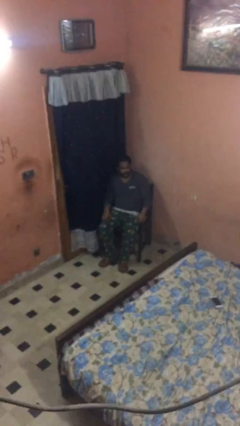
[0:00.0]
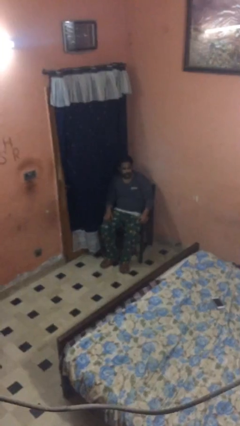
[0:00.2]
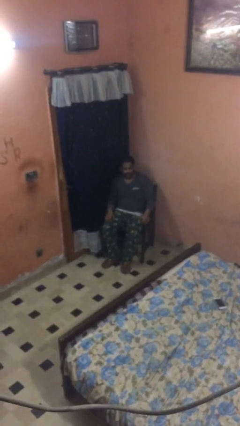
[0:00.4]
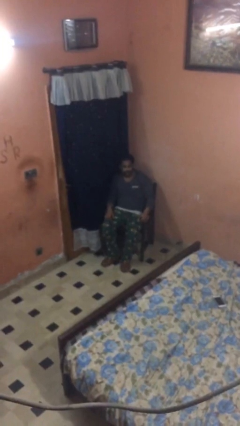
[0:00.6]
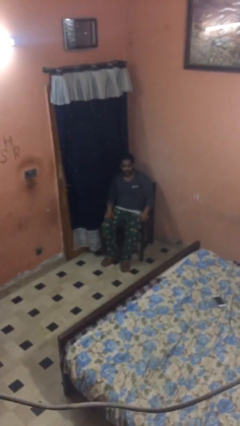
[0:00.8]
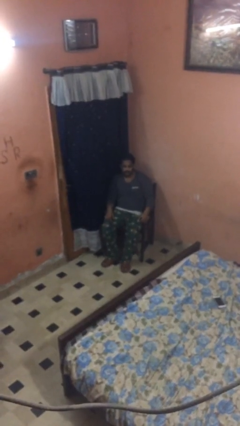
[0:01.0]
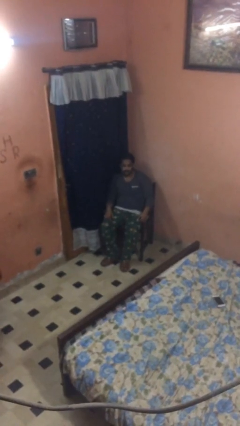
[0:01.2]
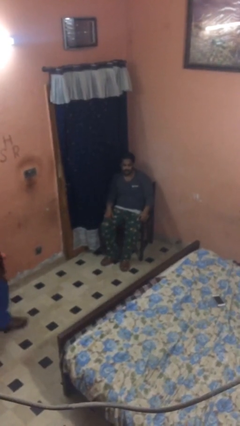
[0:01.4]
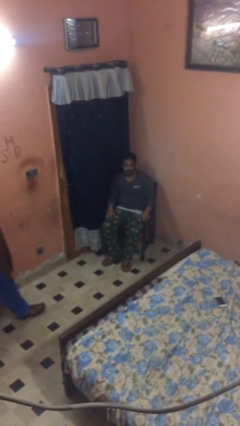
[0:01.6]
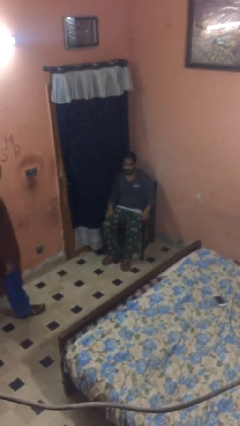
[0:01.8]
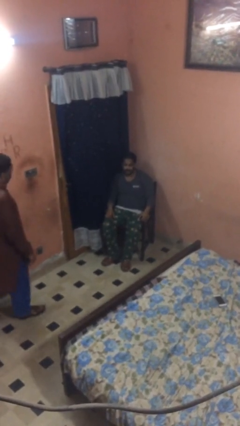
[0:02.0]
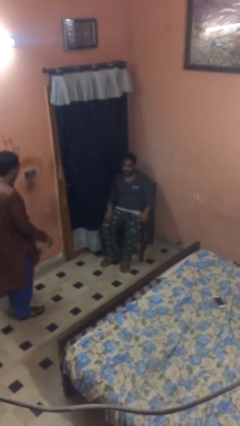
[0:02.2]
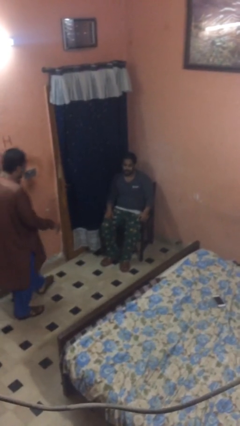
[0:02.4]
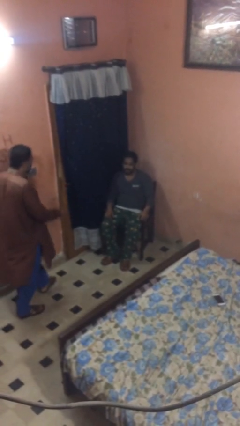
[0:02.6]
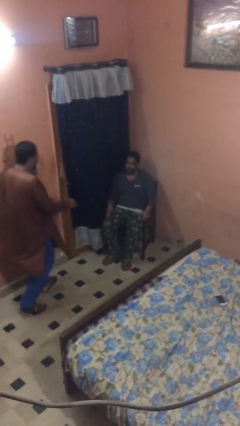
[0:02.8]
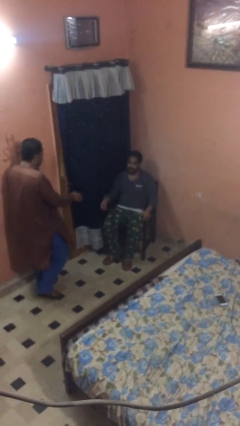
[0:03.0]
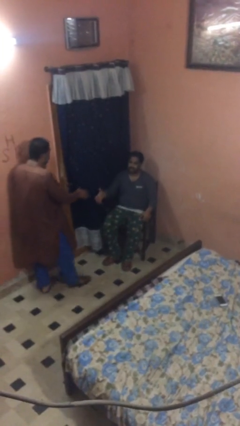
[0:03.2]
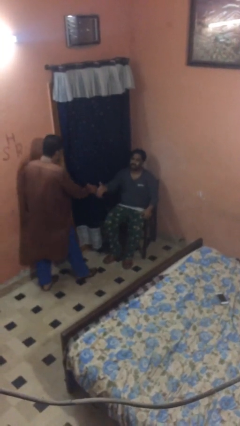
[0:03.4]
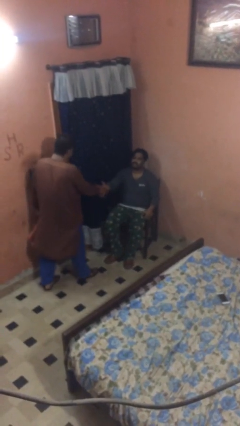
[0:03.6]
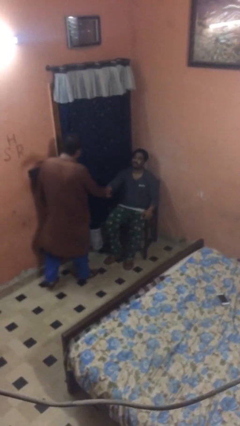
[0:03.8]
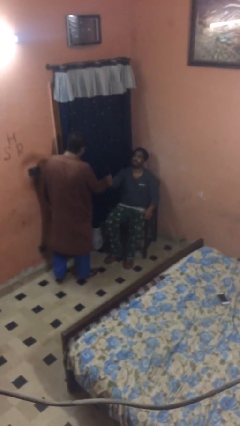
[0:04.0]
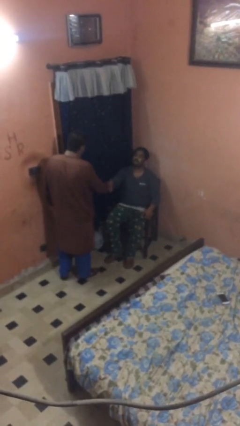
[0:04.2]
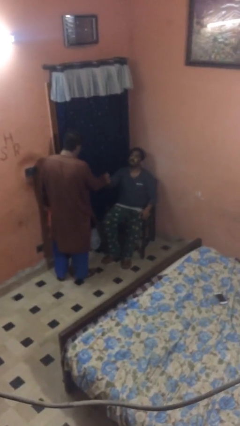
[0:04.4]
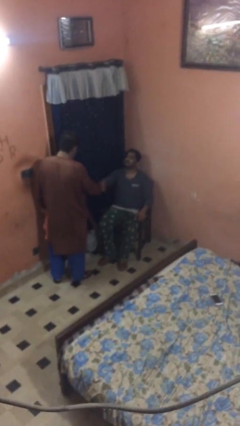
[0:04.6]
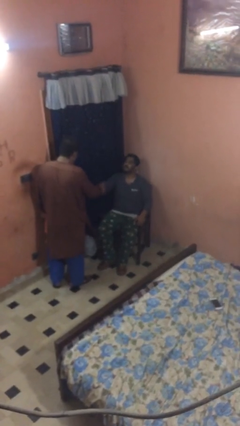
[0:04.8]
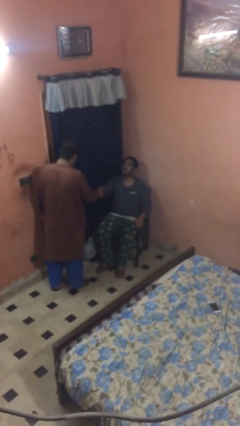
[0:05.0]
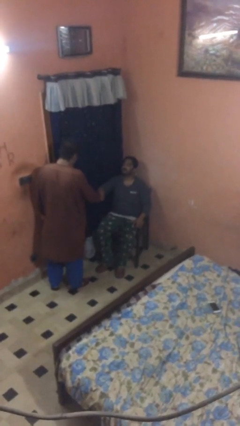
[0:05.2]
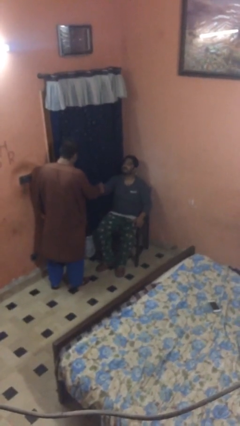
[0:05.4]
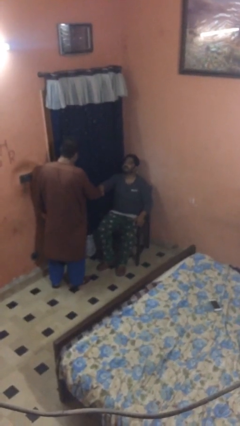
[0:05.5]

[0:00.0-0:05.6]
person shakes hand

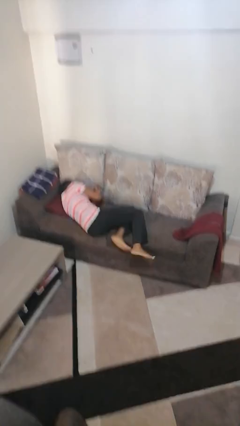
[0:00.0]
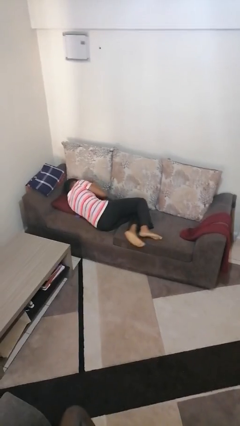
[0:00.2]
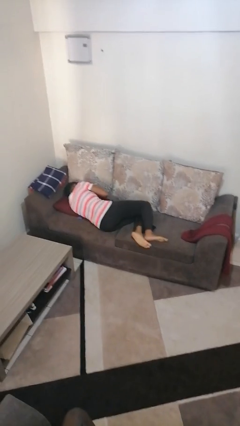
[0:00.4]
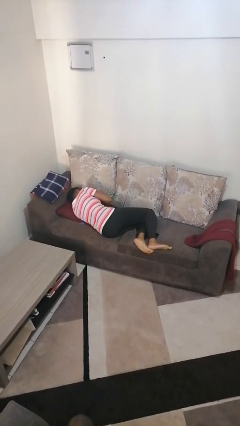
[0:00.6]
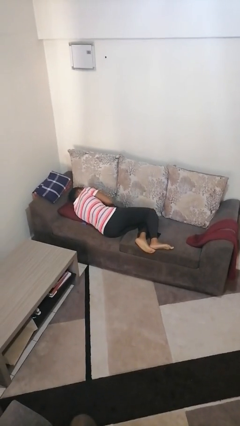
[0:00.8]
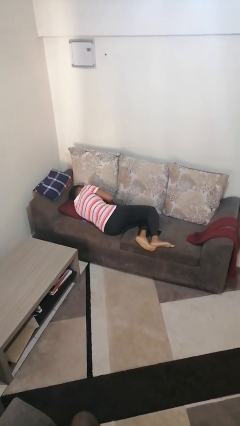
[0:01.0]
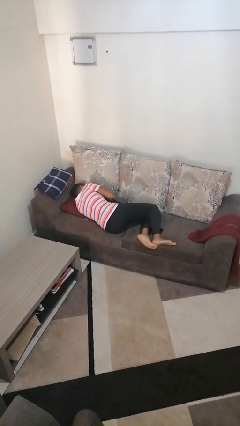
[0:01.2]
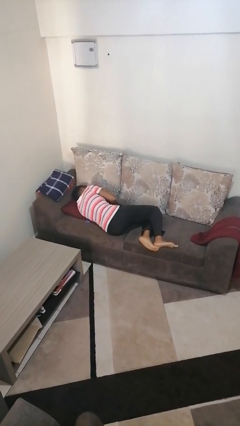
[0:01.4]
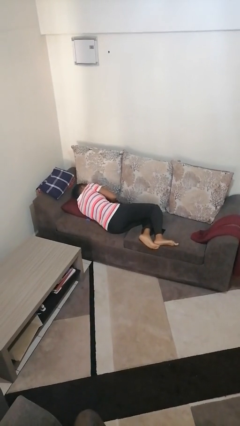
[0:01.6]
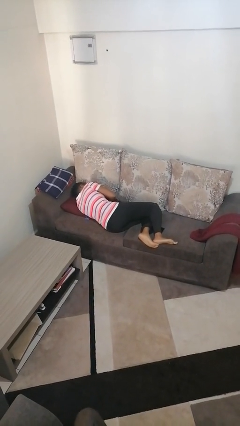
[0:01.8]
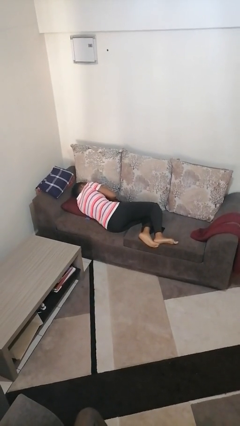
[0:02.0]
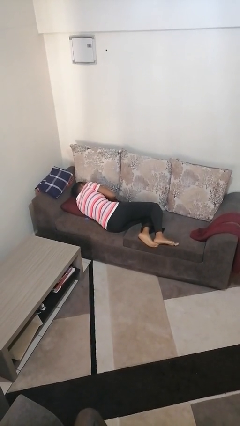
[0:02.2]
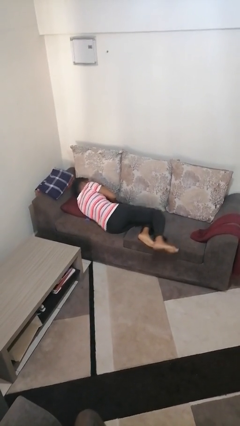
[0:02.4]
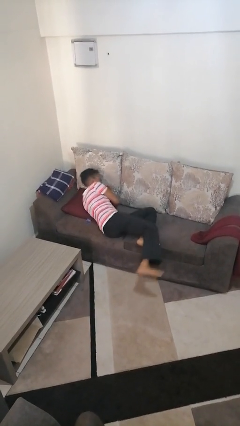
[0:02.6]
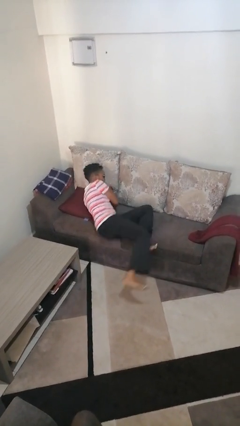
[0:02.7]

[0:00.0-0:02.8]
person lies down on bed

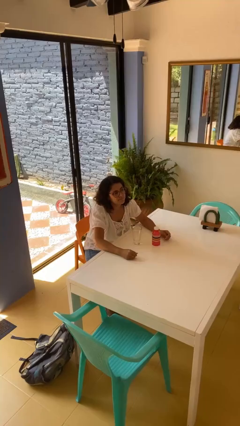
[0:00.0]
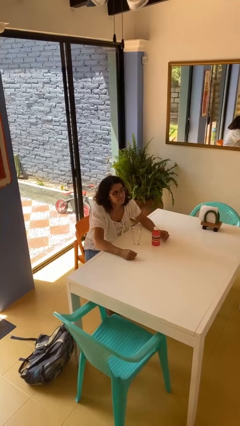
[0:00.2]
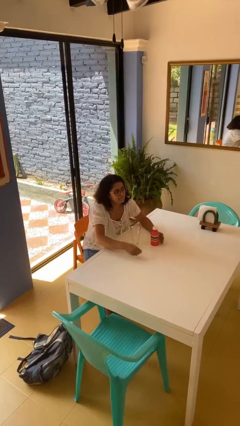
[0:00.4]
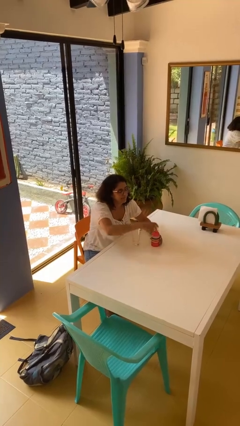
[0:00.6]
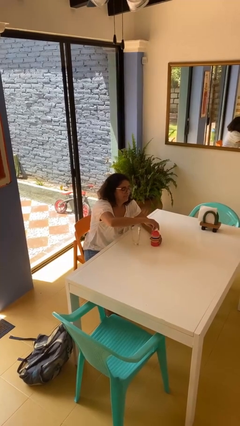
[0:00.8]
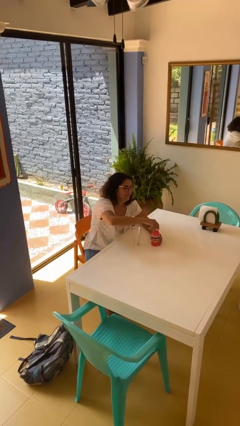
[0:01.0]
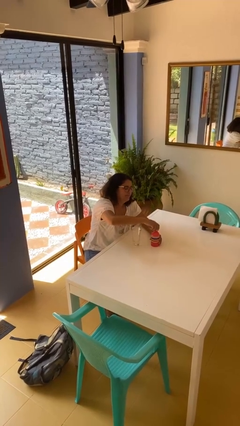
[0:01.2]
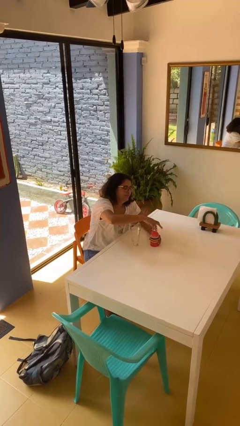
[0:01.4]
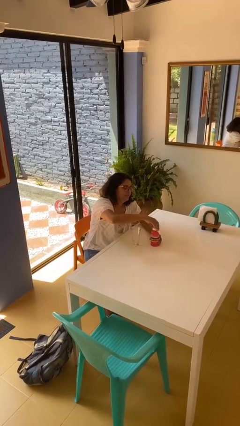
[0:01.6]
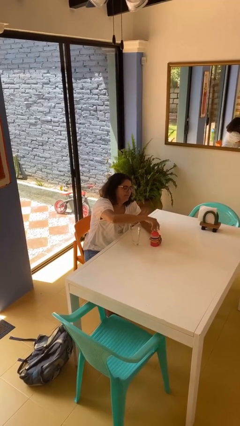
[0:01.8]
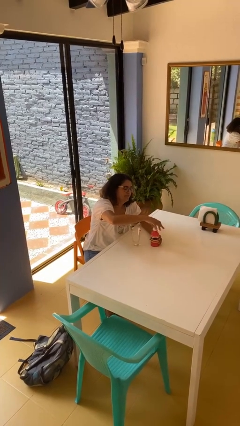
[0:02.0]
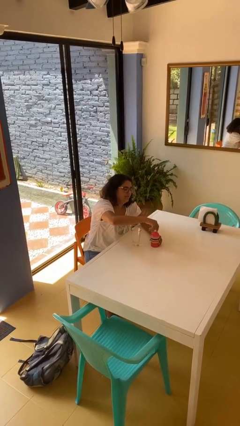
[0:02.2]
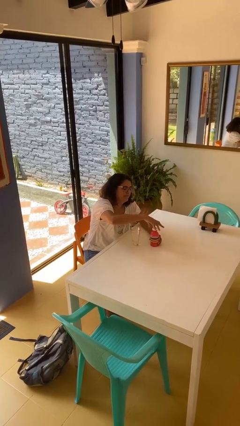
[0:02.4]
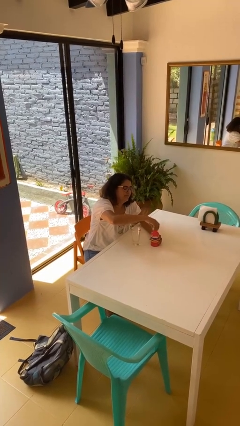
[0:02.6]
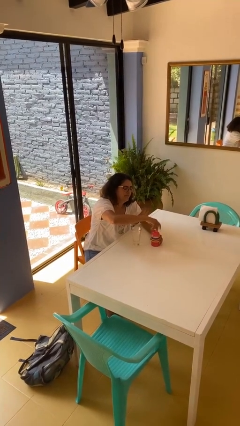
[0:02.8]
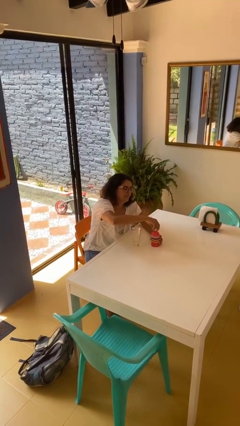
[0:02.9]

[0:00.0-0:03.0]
person unscrews lid from bottle

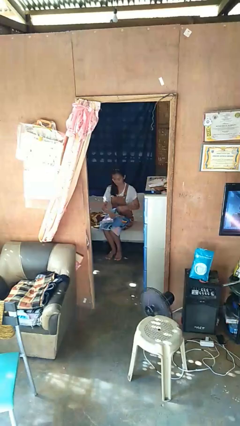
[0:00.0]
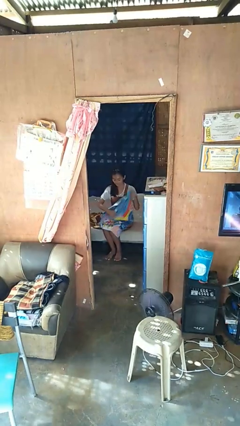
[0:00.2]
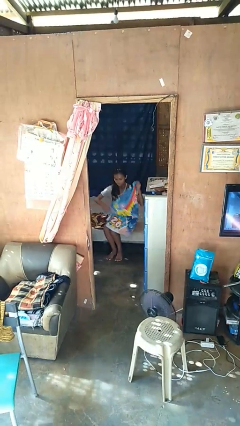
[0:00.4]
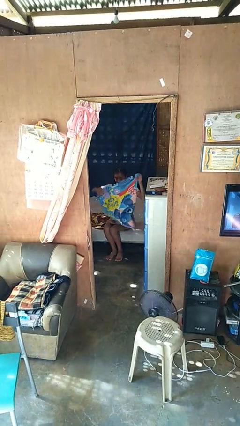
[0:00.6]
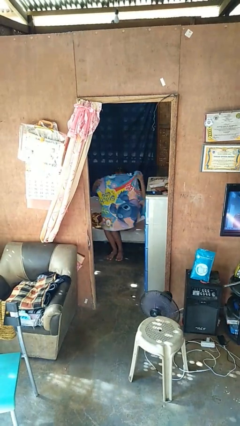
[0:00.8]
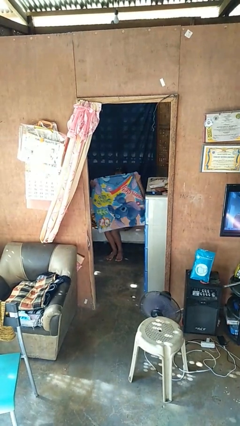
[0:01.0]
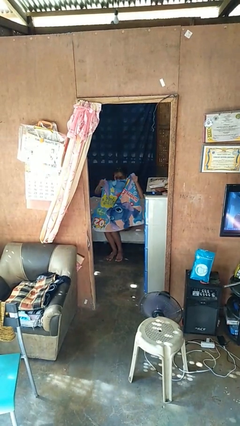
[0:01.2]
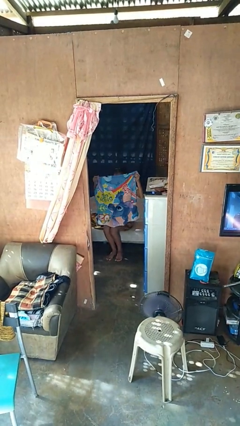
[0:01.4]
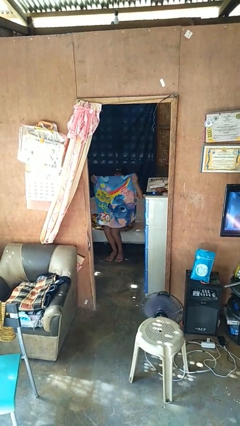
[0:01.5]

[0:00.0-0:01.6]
person unfolds blanket

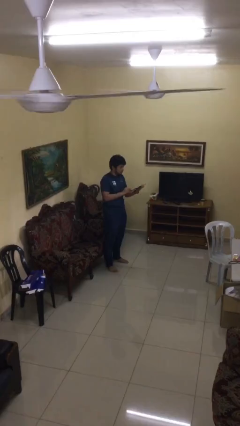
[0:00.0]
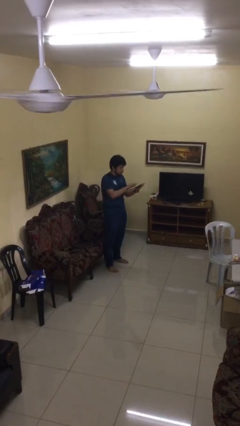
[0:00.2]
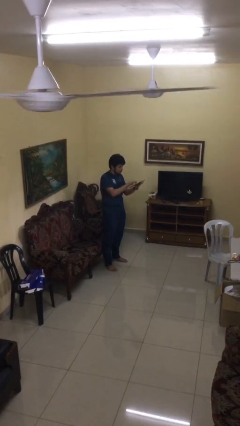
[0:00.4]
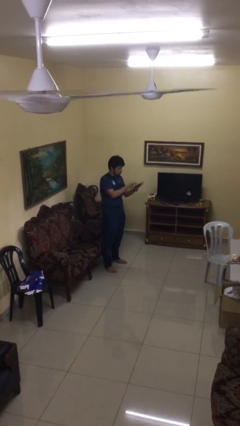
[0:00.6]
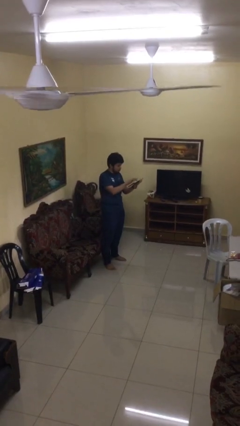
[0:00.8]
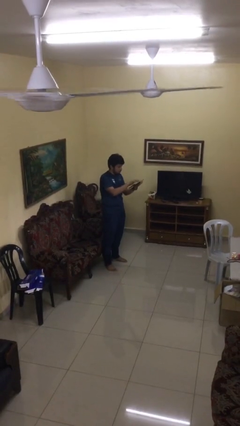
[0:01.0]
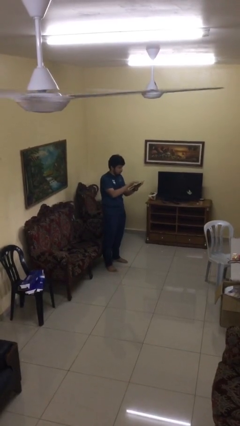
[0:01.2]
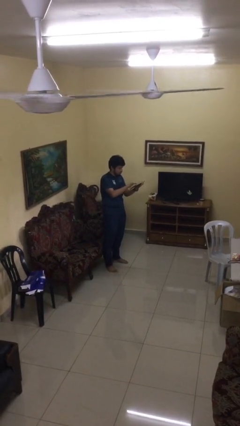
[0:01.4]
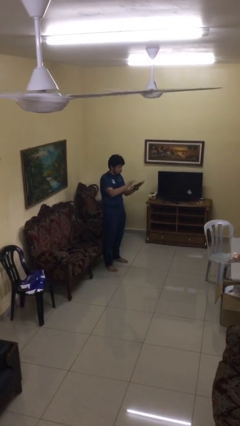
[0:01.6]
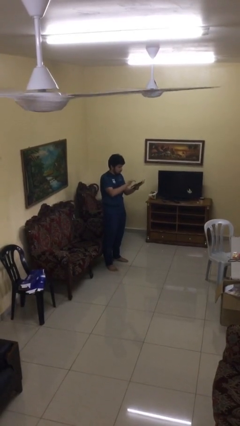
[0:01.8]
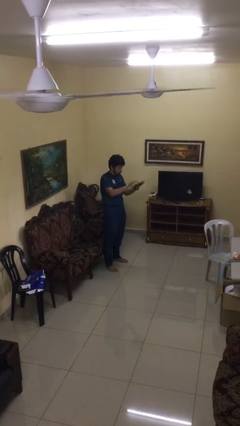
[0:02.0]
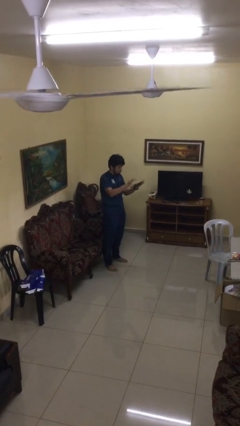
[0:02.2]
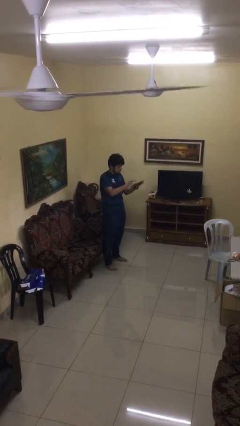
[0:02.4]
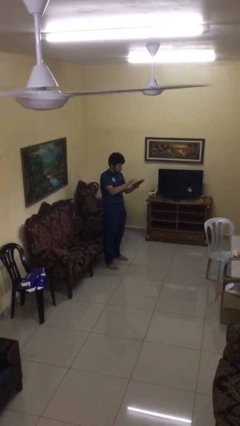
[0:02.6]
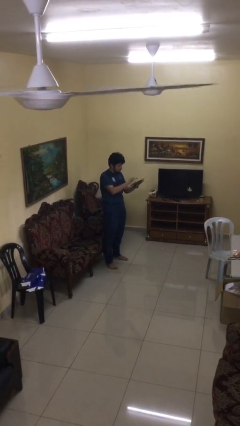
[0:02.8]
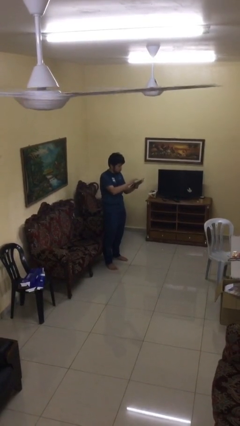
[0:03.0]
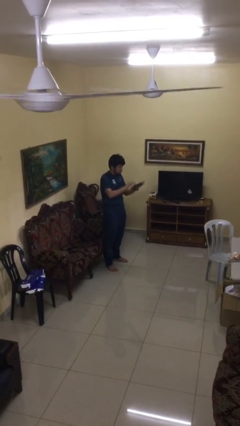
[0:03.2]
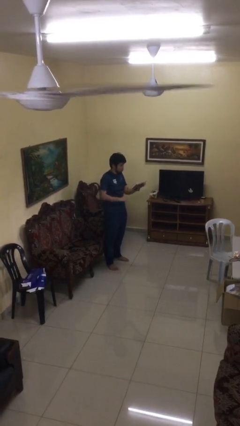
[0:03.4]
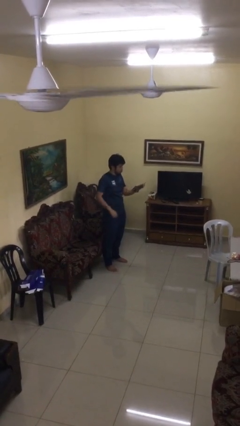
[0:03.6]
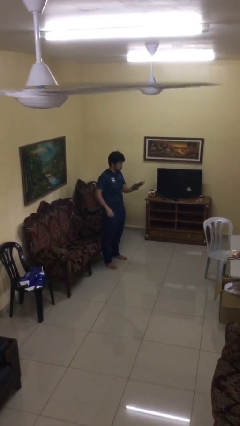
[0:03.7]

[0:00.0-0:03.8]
person interacts with tablet

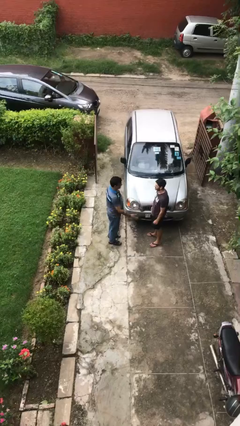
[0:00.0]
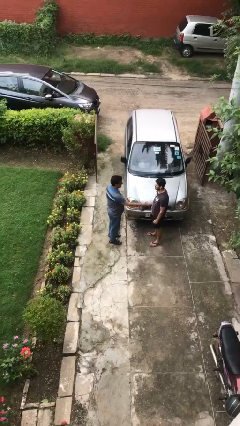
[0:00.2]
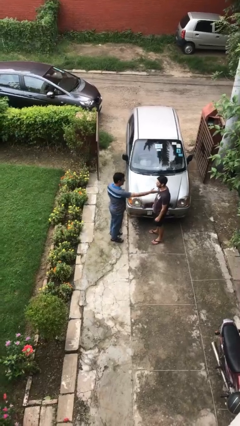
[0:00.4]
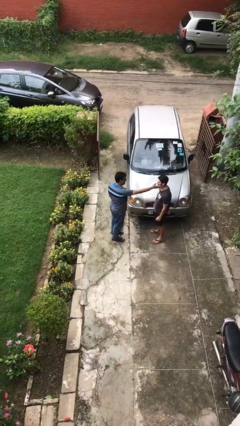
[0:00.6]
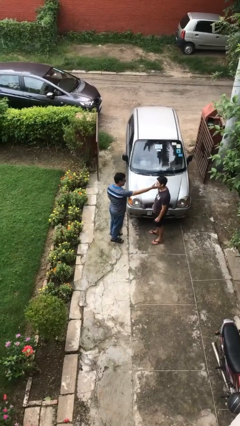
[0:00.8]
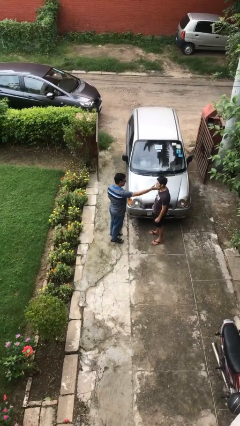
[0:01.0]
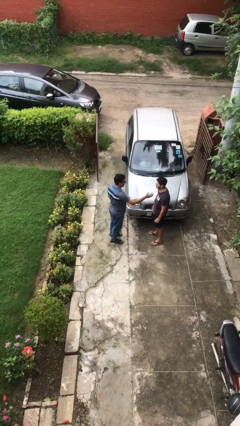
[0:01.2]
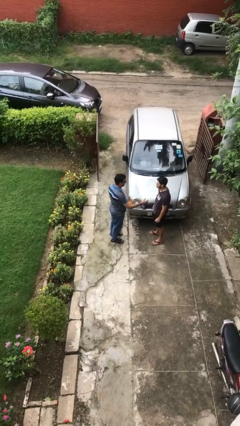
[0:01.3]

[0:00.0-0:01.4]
person touches face of person
